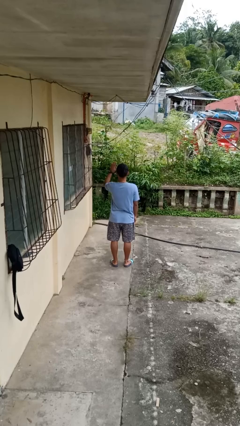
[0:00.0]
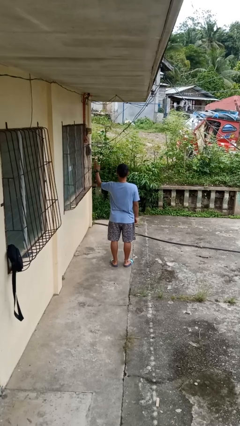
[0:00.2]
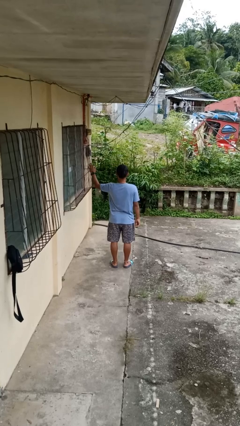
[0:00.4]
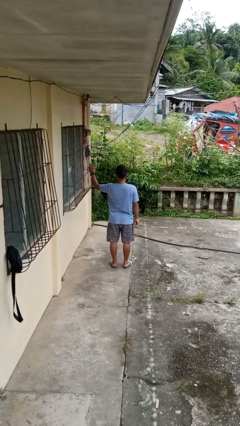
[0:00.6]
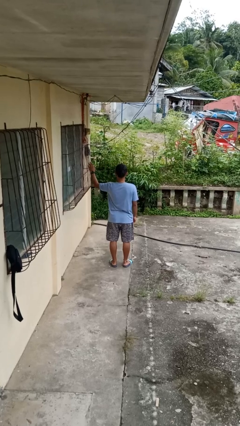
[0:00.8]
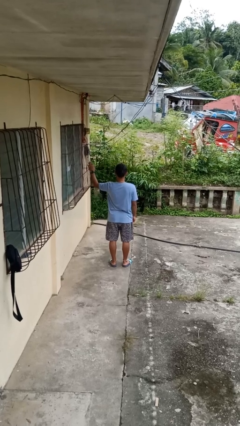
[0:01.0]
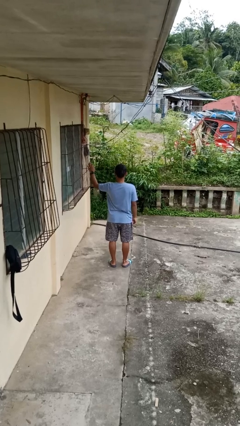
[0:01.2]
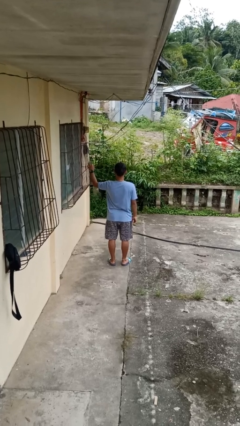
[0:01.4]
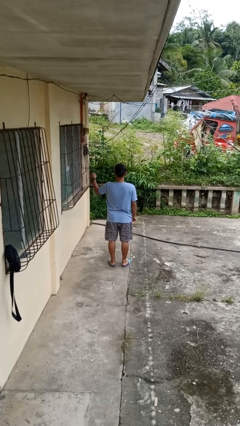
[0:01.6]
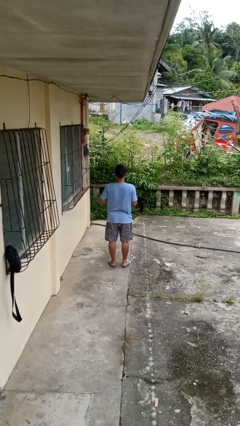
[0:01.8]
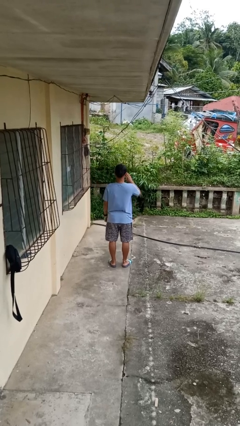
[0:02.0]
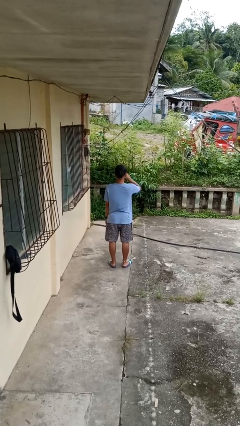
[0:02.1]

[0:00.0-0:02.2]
person gestures swipe left

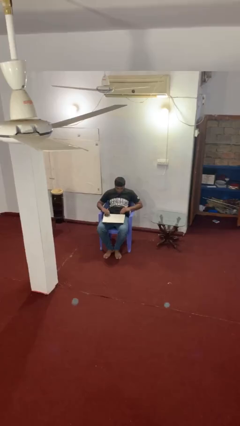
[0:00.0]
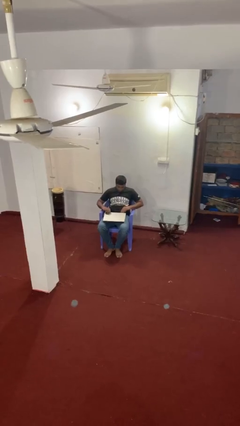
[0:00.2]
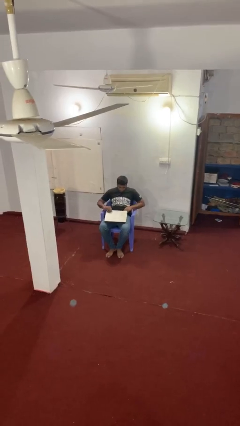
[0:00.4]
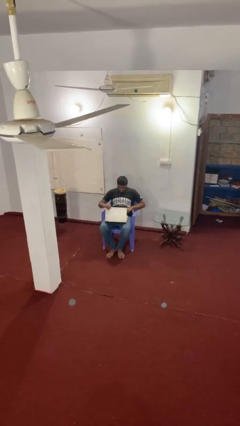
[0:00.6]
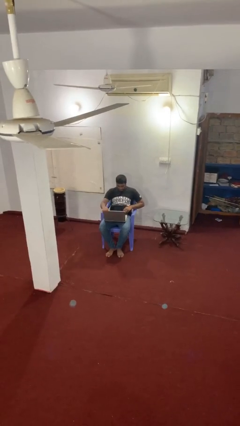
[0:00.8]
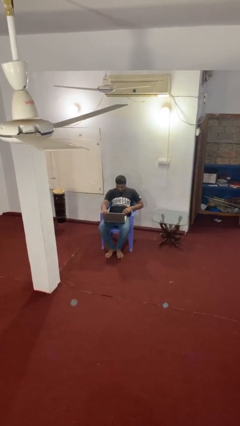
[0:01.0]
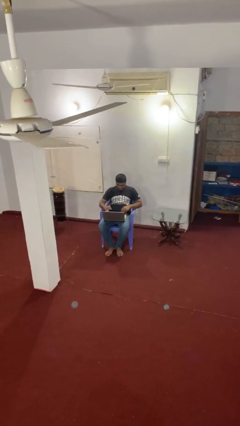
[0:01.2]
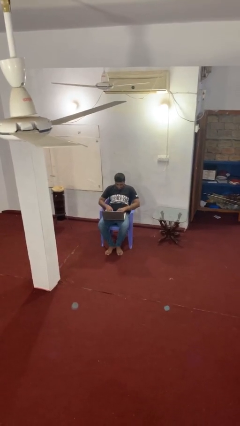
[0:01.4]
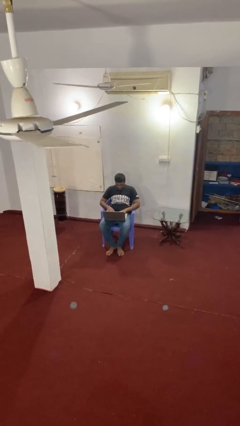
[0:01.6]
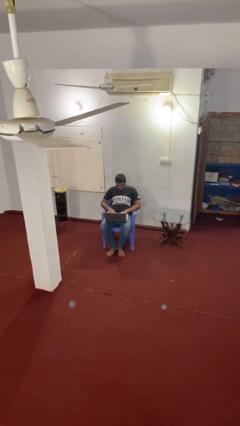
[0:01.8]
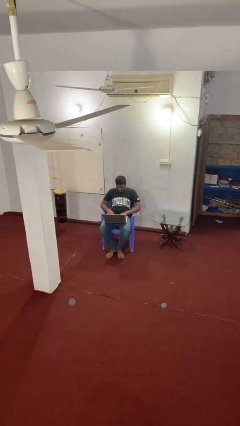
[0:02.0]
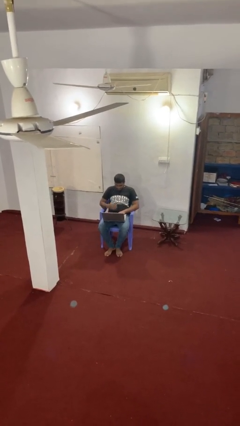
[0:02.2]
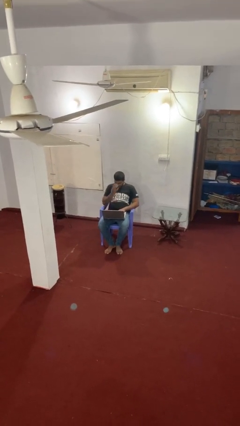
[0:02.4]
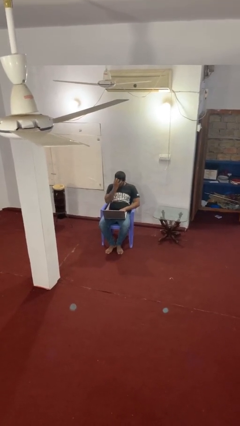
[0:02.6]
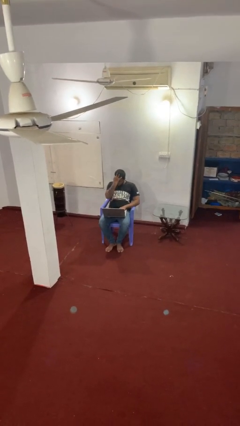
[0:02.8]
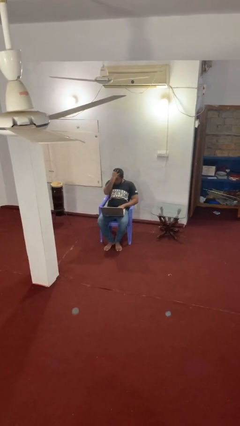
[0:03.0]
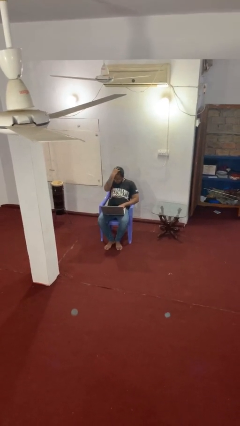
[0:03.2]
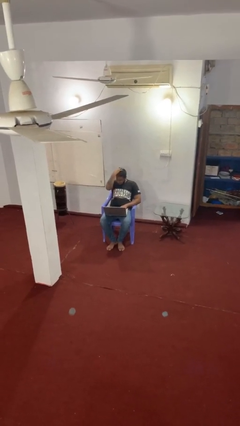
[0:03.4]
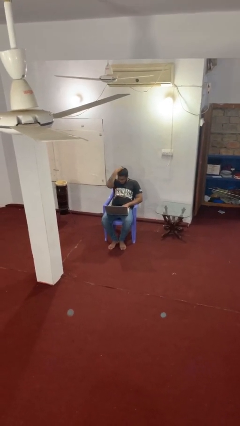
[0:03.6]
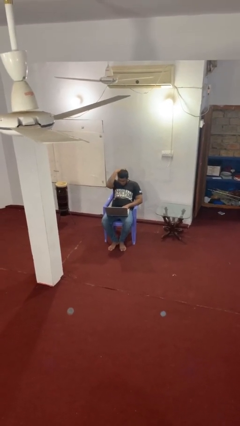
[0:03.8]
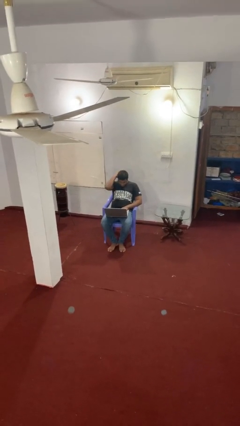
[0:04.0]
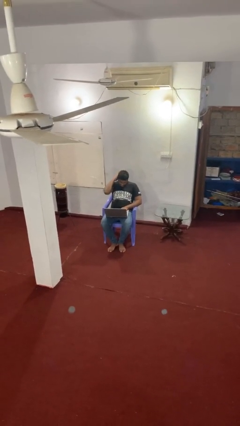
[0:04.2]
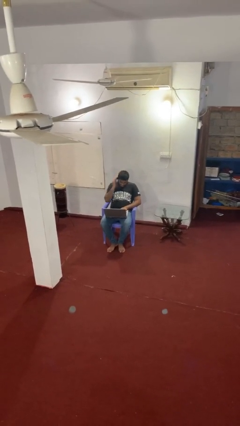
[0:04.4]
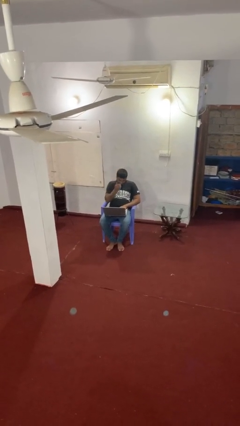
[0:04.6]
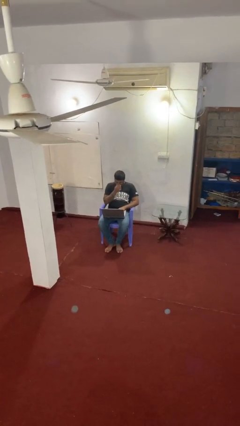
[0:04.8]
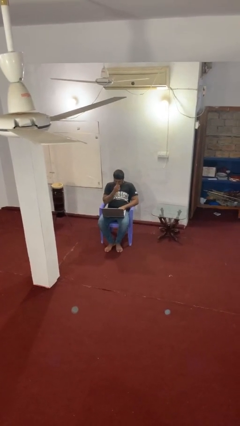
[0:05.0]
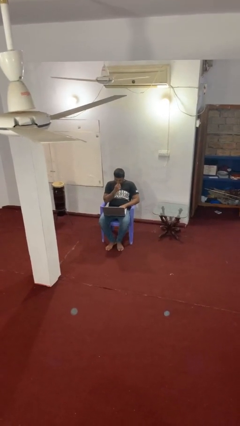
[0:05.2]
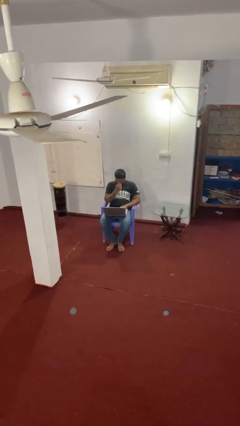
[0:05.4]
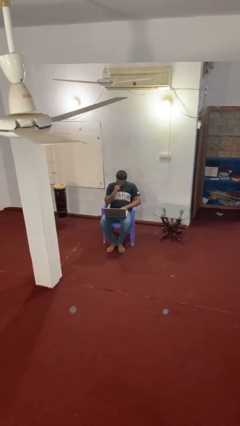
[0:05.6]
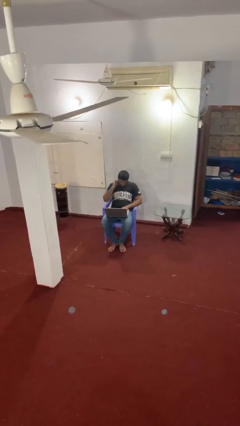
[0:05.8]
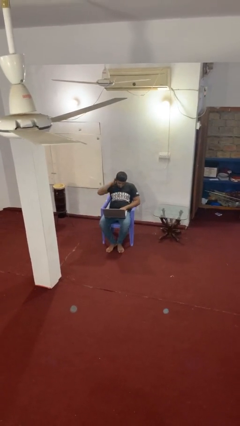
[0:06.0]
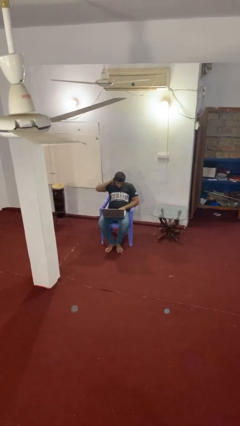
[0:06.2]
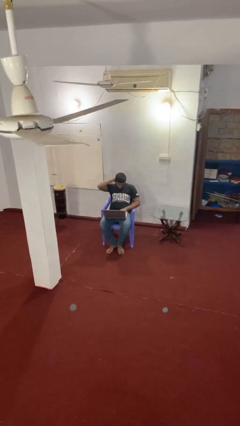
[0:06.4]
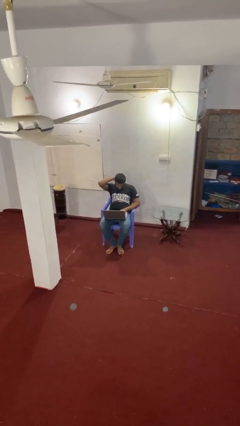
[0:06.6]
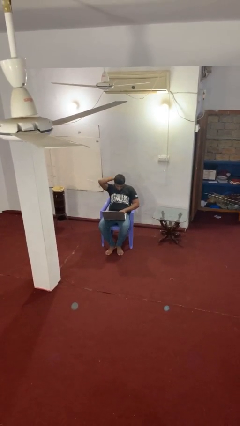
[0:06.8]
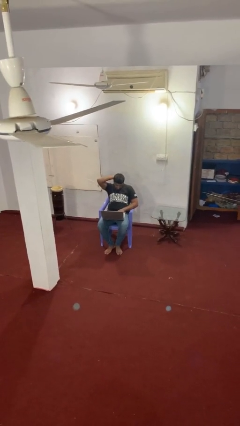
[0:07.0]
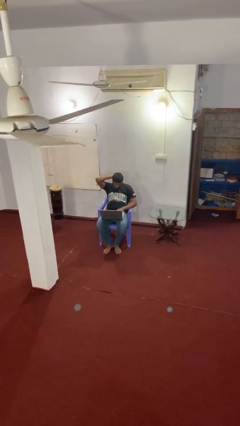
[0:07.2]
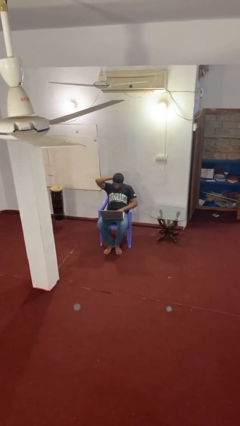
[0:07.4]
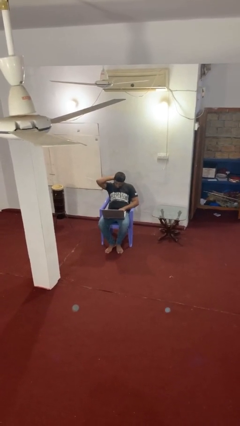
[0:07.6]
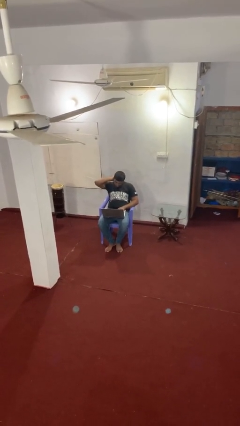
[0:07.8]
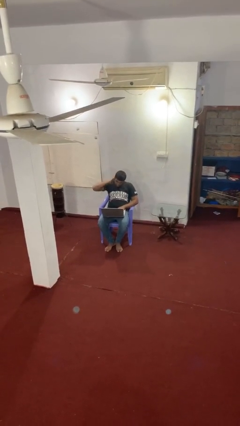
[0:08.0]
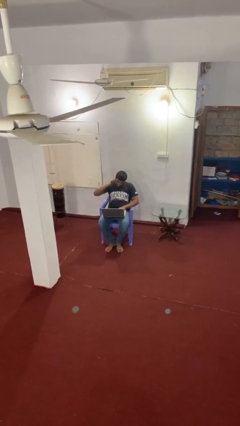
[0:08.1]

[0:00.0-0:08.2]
person interacts with laptop

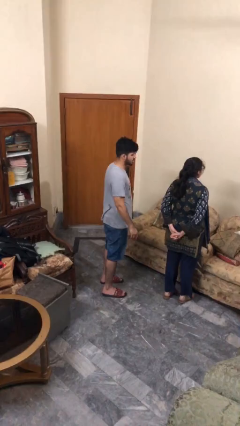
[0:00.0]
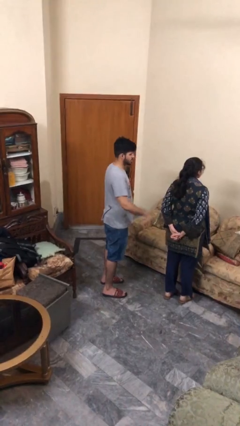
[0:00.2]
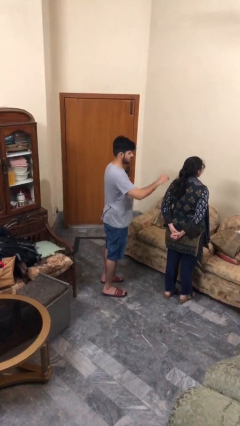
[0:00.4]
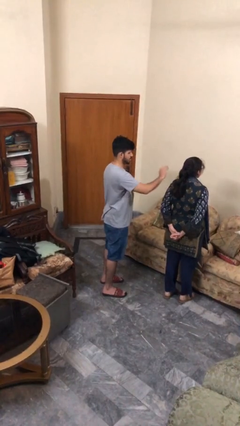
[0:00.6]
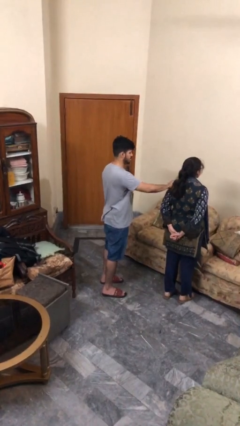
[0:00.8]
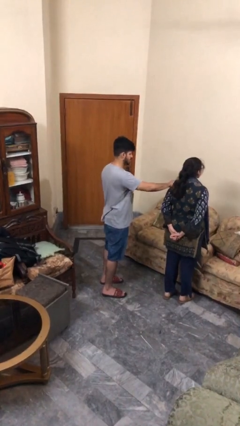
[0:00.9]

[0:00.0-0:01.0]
person grabs person by shoulder

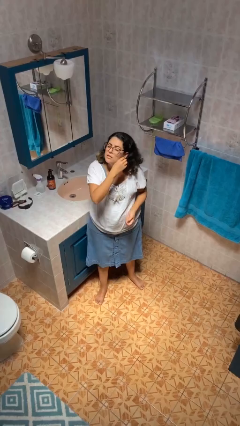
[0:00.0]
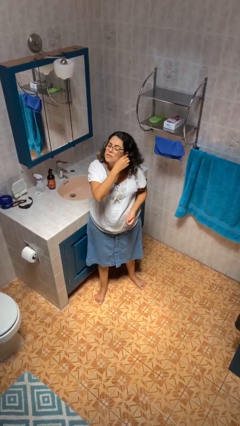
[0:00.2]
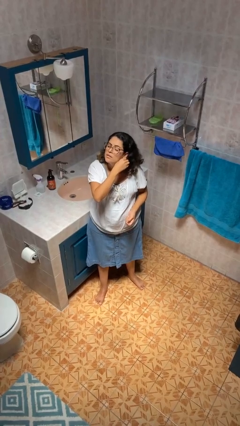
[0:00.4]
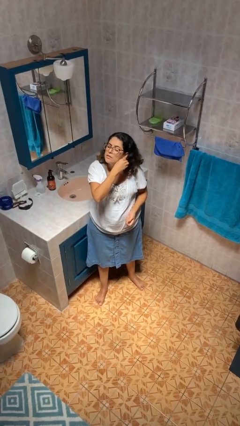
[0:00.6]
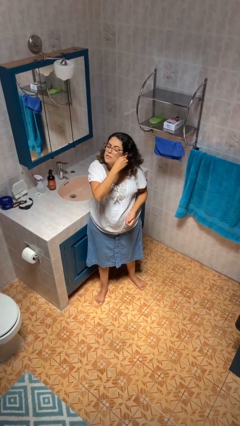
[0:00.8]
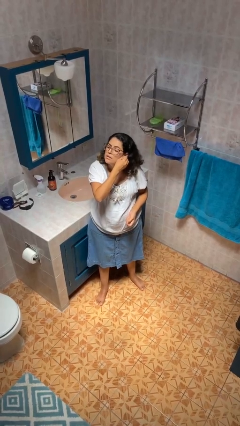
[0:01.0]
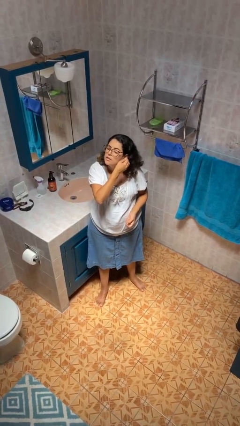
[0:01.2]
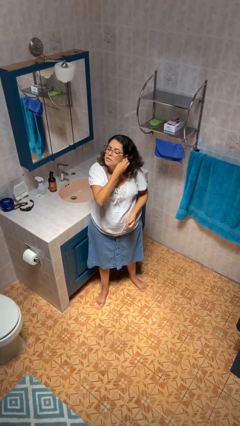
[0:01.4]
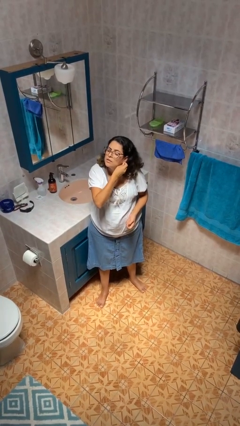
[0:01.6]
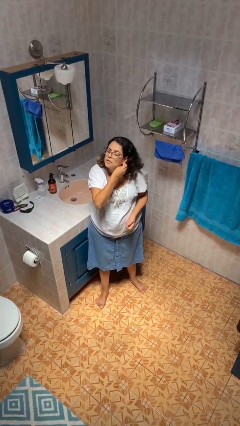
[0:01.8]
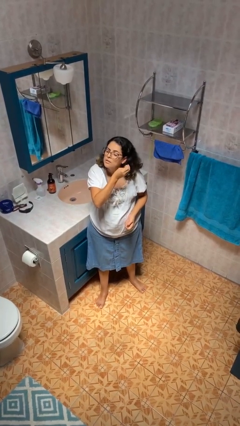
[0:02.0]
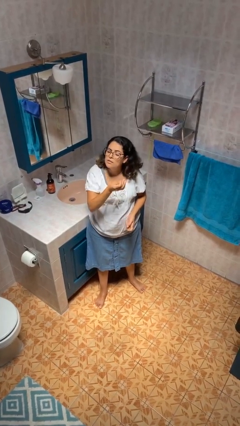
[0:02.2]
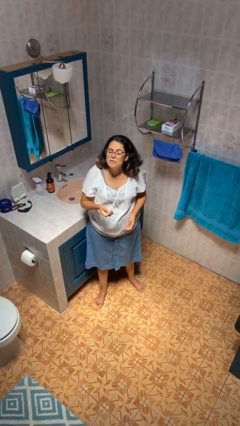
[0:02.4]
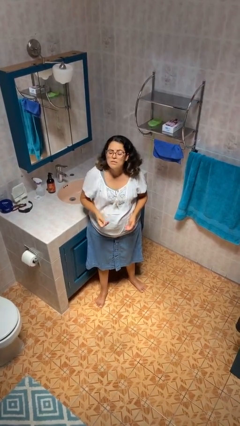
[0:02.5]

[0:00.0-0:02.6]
person takes off earrings

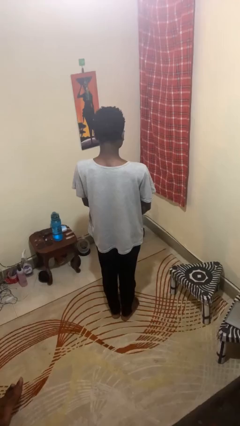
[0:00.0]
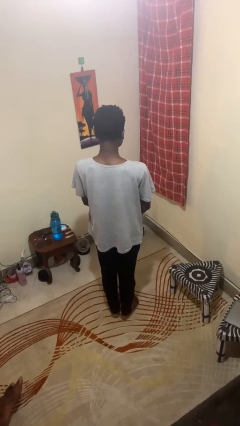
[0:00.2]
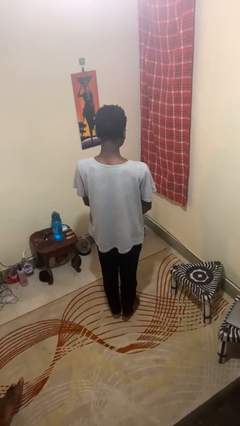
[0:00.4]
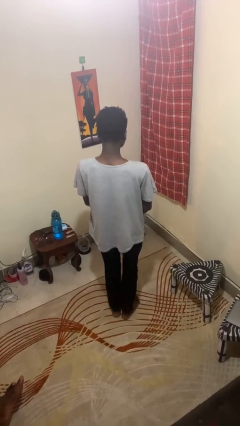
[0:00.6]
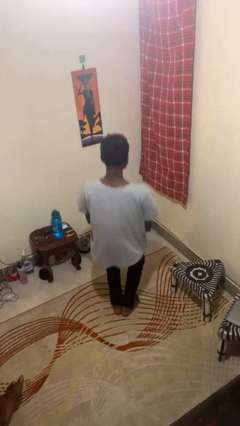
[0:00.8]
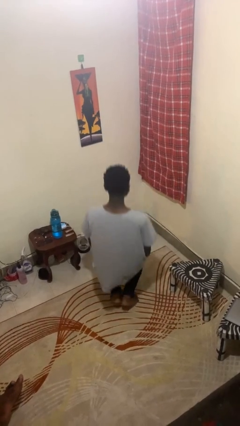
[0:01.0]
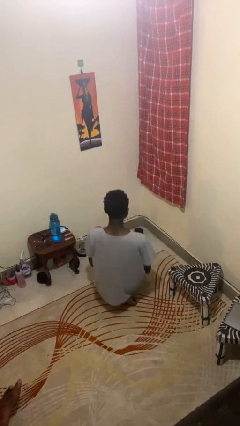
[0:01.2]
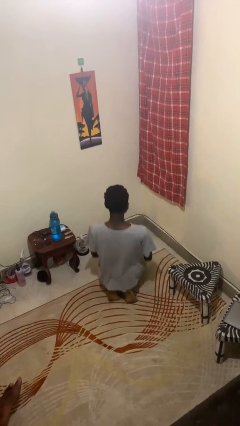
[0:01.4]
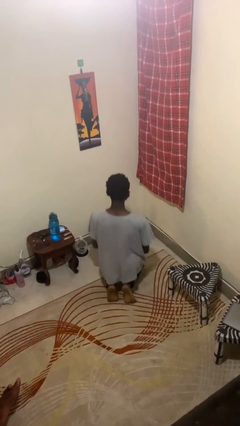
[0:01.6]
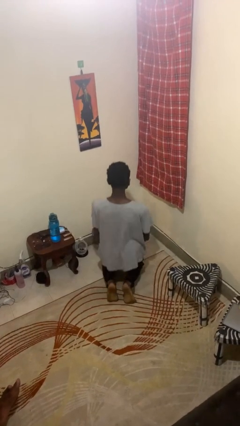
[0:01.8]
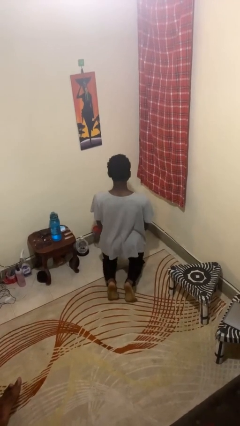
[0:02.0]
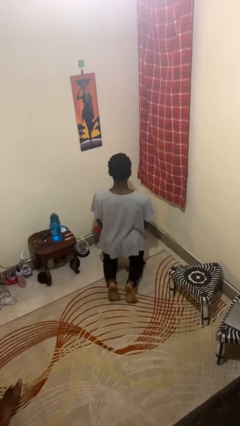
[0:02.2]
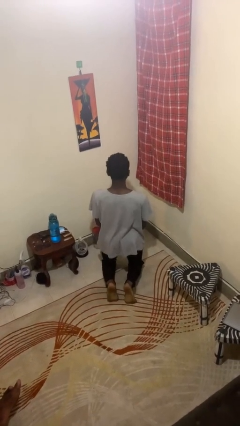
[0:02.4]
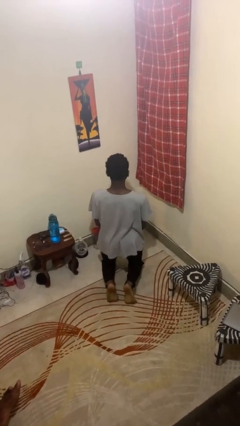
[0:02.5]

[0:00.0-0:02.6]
person kneels

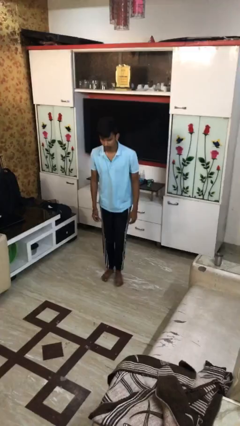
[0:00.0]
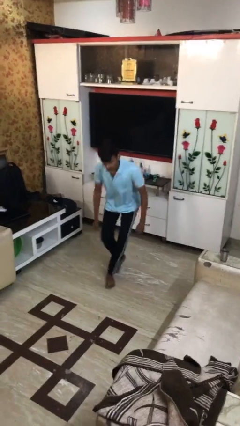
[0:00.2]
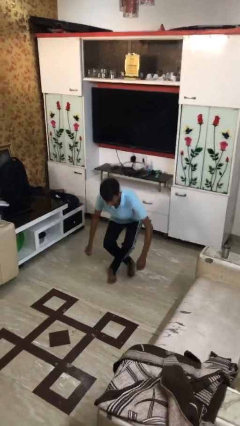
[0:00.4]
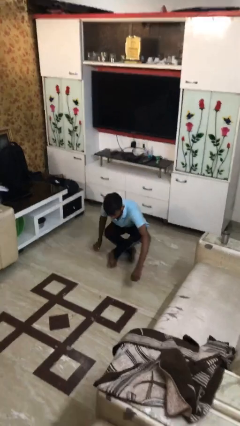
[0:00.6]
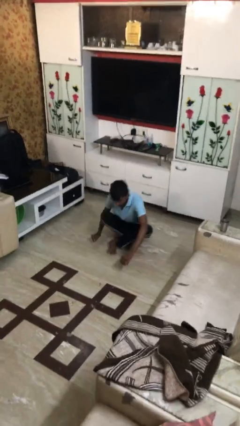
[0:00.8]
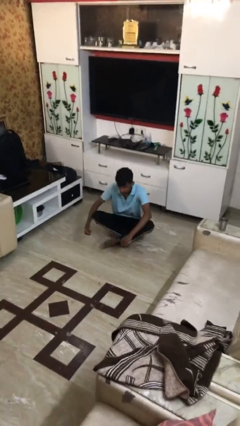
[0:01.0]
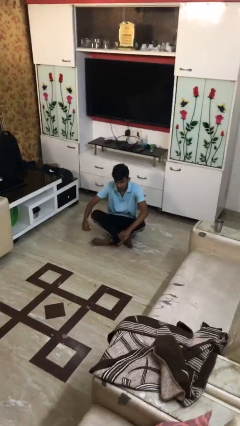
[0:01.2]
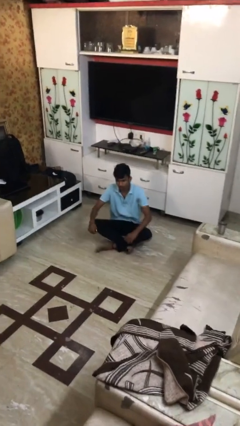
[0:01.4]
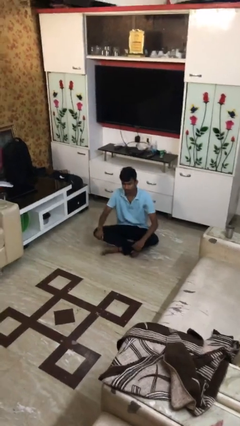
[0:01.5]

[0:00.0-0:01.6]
person sits crisscross
